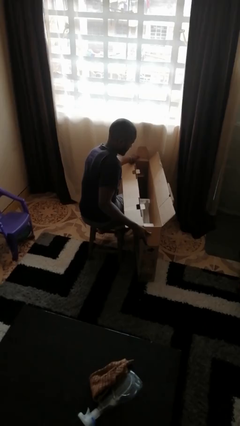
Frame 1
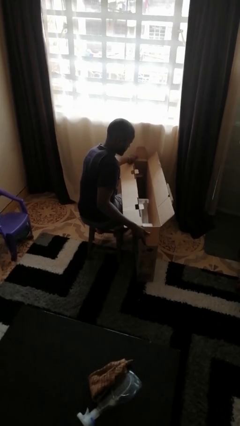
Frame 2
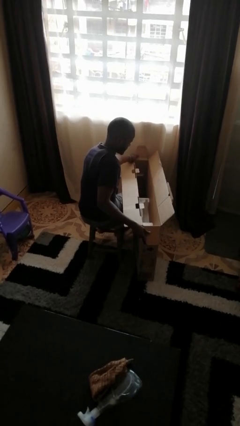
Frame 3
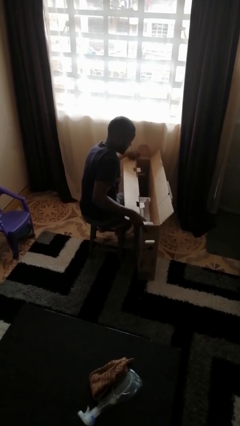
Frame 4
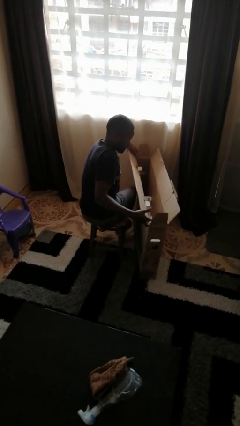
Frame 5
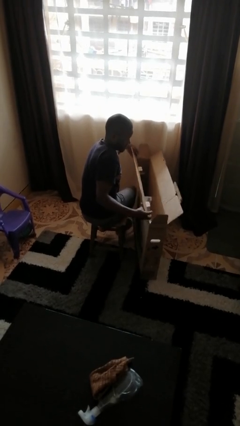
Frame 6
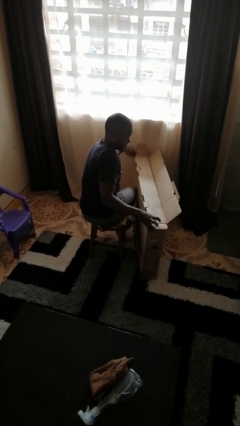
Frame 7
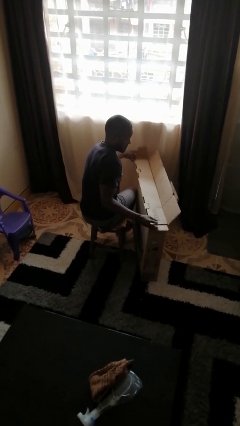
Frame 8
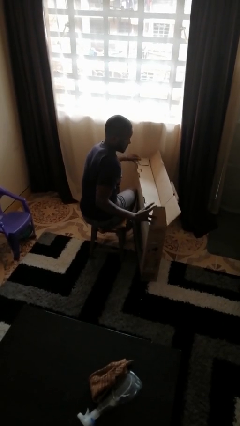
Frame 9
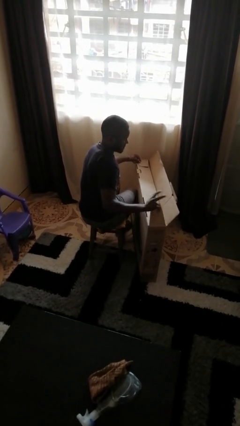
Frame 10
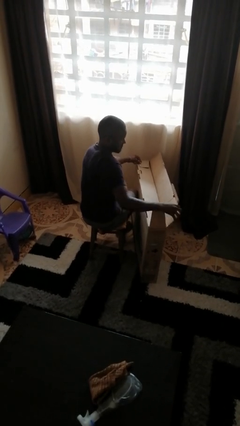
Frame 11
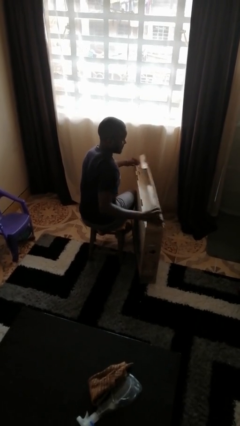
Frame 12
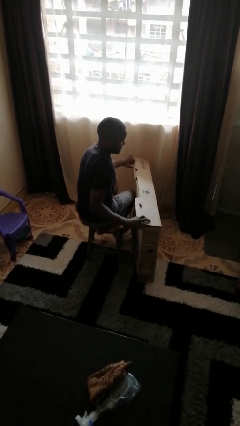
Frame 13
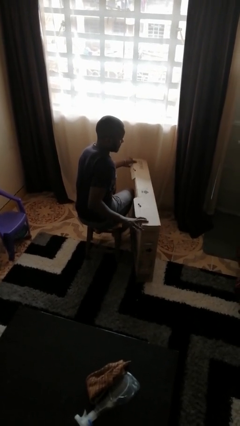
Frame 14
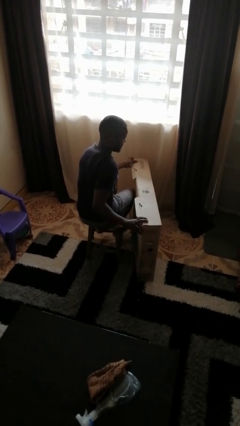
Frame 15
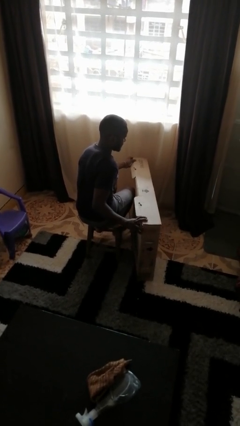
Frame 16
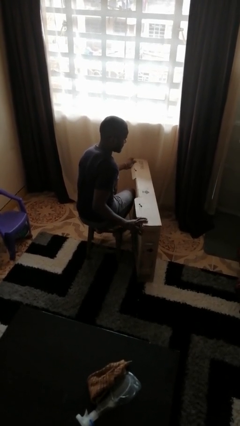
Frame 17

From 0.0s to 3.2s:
person closes box

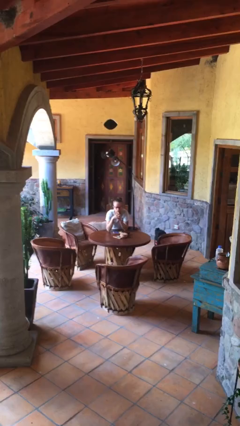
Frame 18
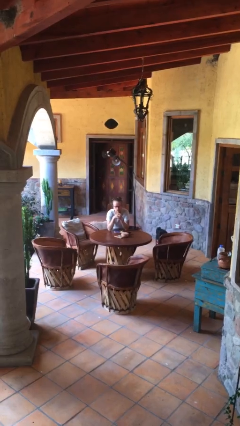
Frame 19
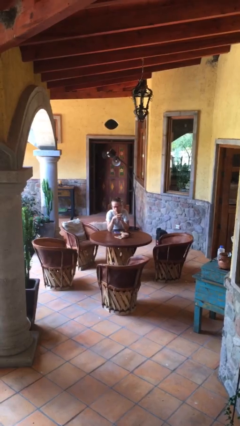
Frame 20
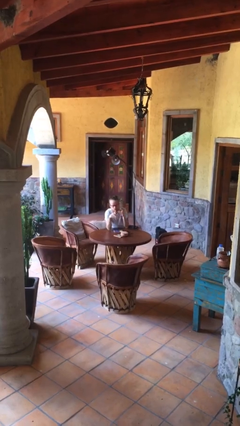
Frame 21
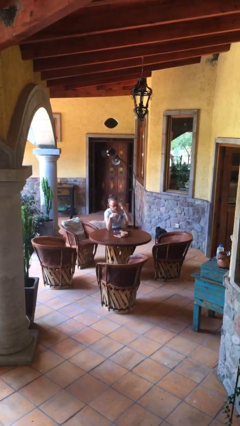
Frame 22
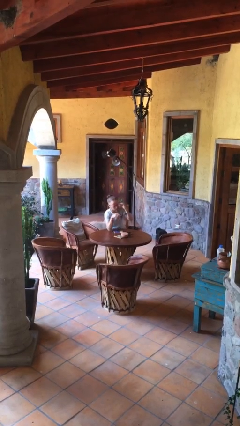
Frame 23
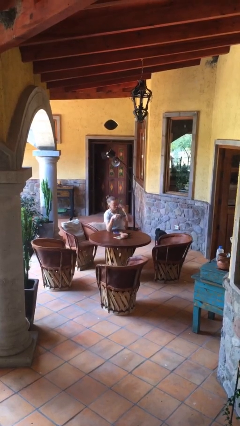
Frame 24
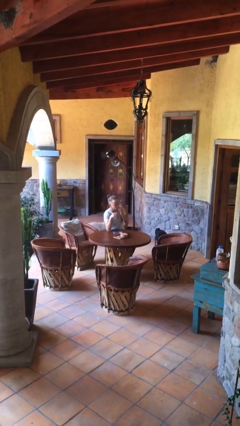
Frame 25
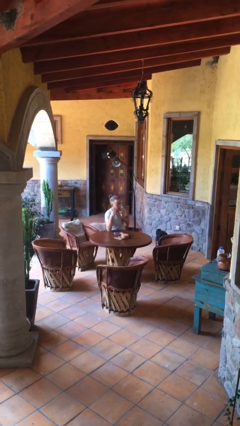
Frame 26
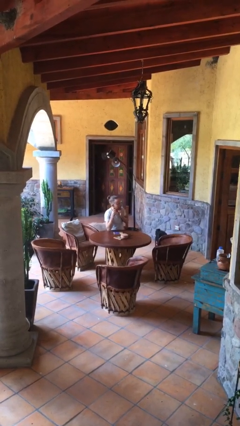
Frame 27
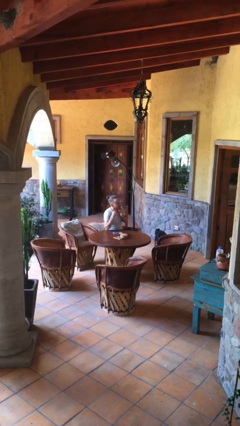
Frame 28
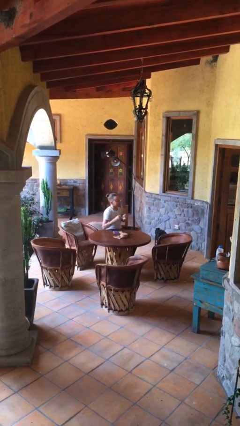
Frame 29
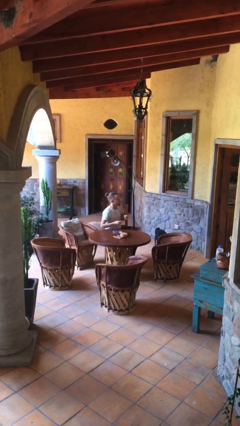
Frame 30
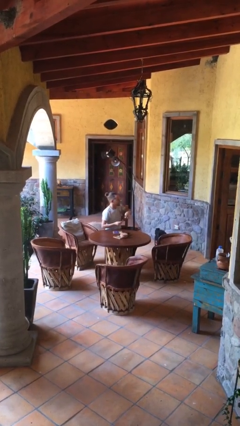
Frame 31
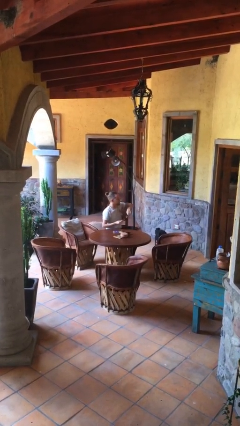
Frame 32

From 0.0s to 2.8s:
person takes off glasses

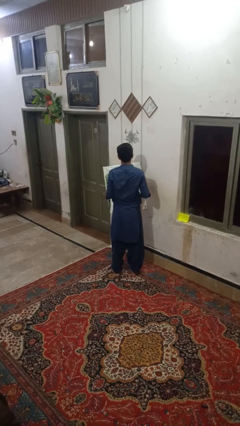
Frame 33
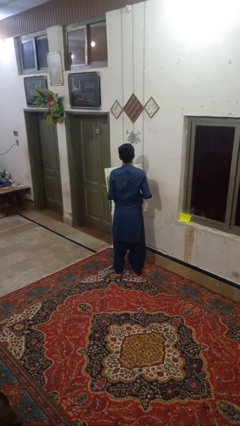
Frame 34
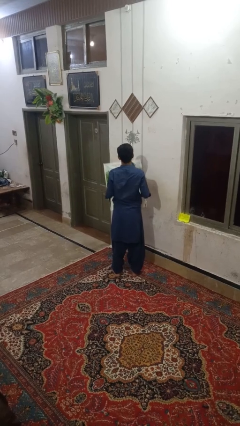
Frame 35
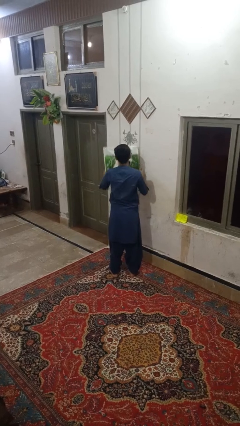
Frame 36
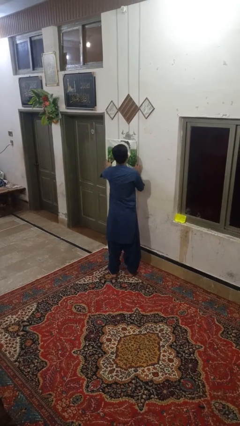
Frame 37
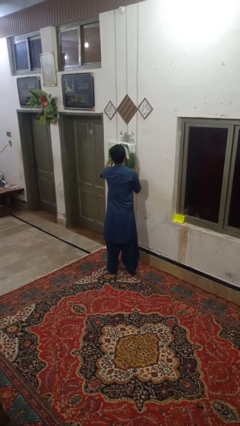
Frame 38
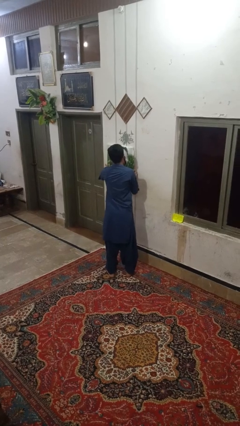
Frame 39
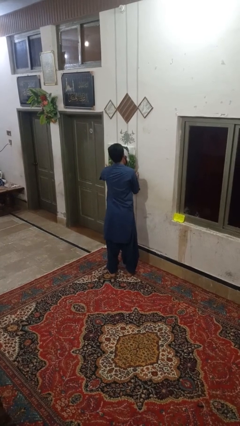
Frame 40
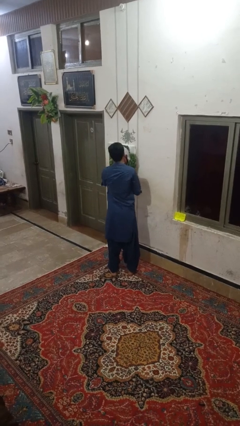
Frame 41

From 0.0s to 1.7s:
person puts up picture frame

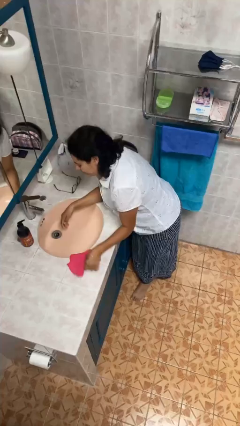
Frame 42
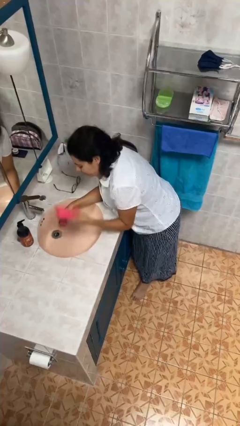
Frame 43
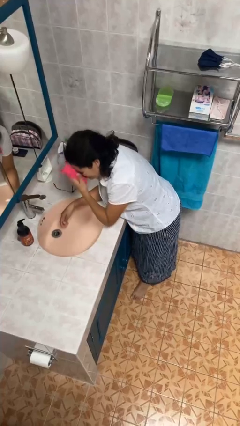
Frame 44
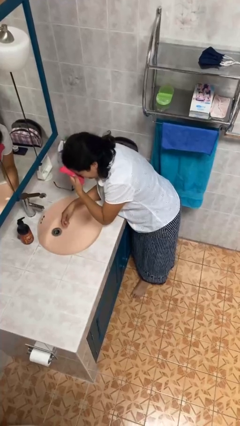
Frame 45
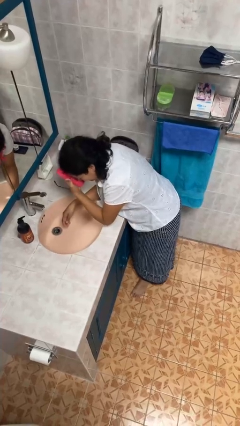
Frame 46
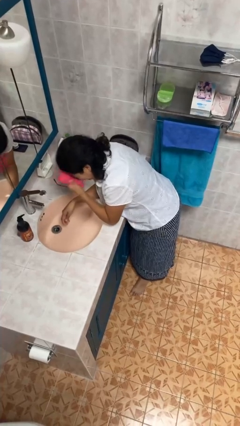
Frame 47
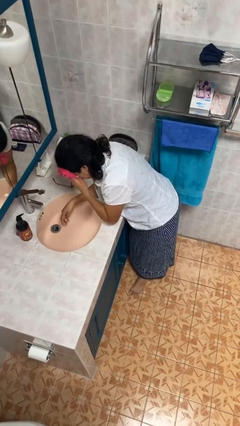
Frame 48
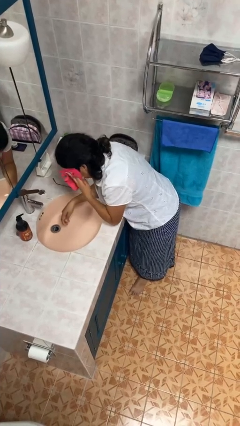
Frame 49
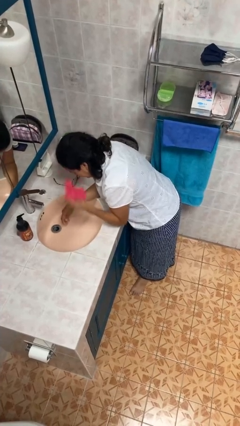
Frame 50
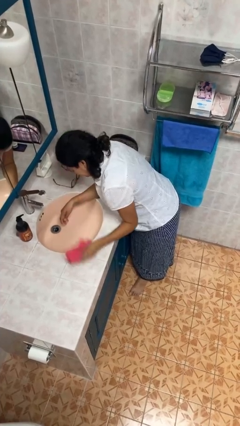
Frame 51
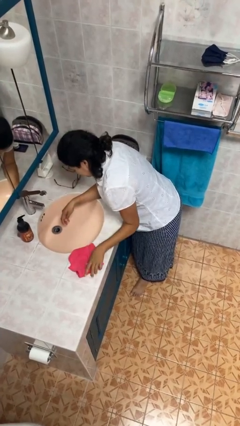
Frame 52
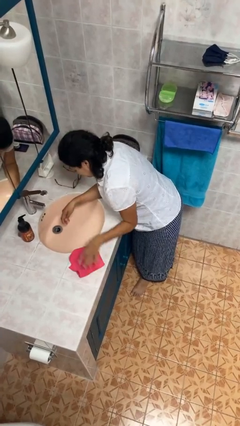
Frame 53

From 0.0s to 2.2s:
person dries face with towel

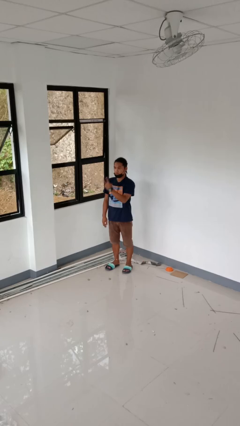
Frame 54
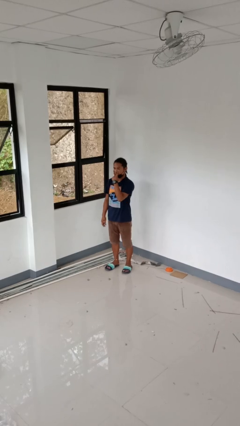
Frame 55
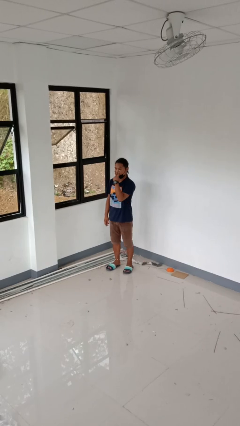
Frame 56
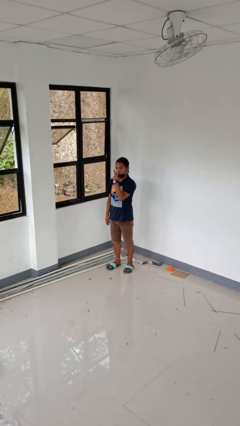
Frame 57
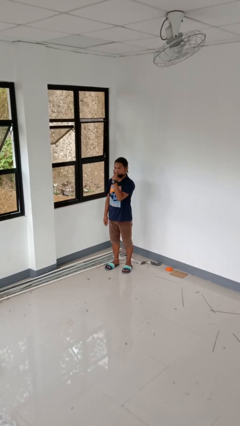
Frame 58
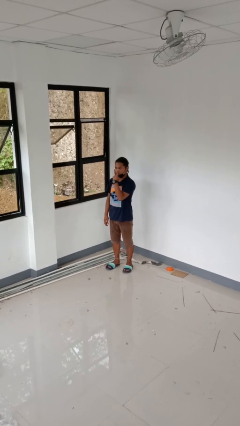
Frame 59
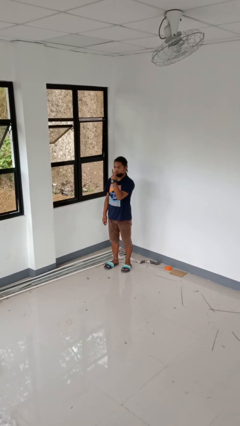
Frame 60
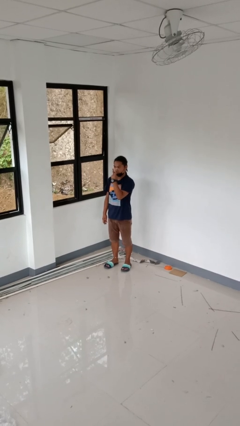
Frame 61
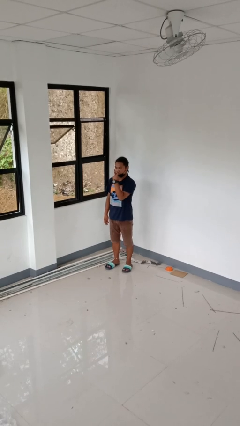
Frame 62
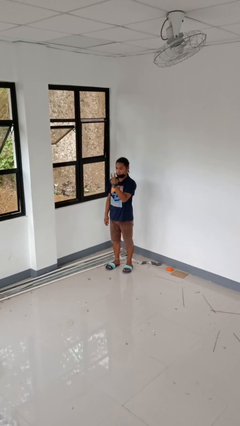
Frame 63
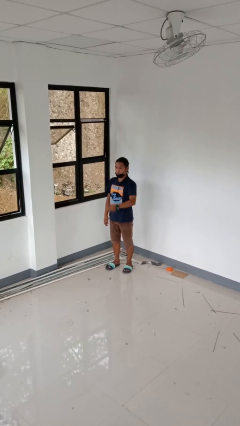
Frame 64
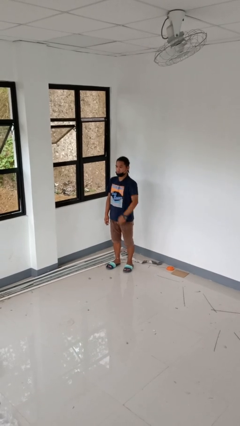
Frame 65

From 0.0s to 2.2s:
person gestures watch closely

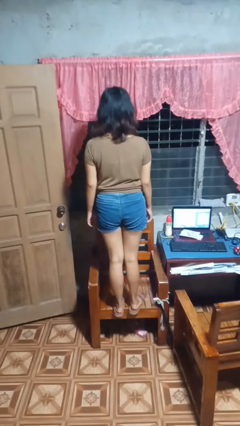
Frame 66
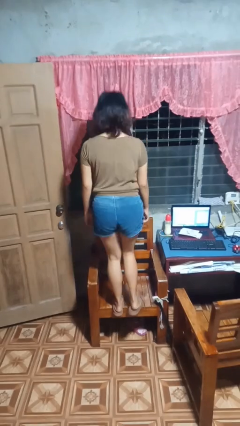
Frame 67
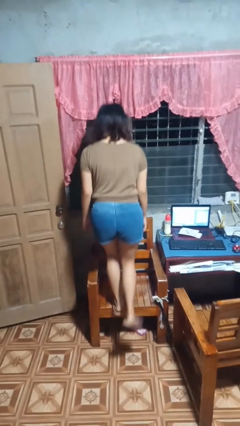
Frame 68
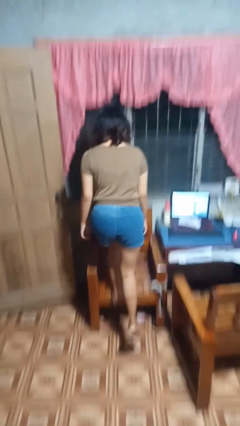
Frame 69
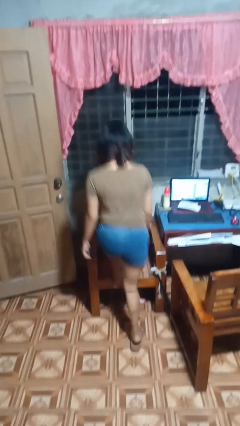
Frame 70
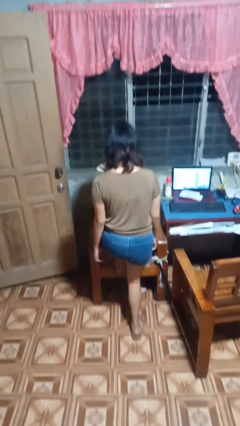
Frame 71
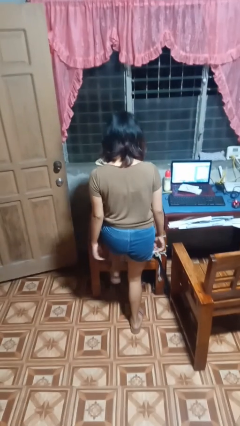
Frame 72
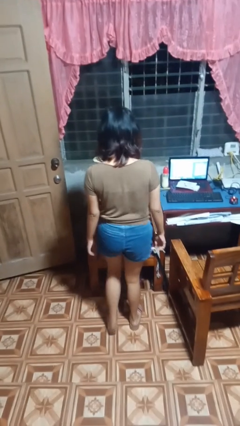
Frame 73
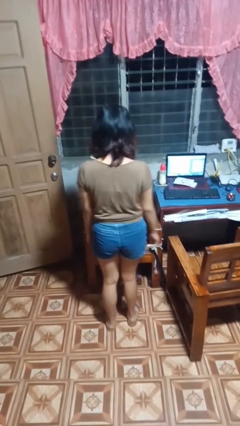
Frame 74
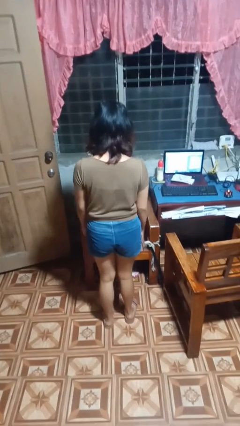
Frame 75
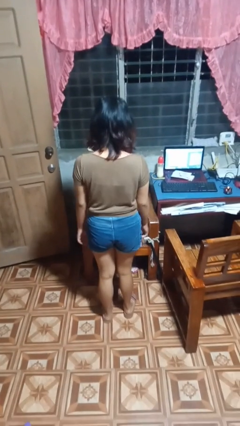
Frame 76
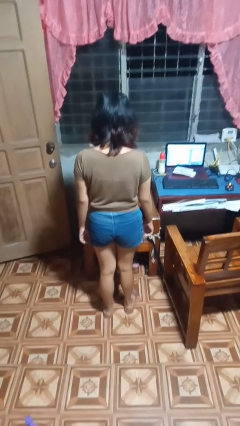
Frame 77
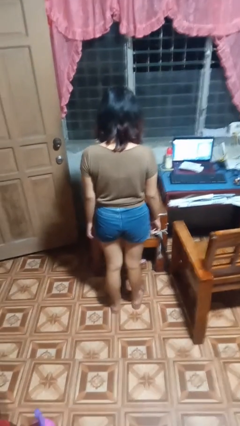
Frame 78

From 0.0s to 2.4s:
person climbs off chair

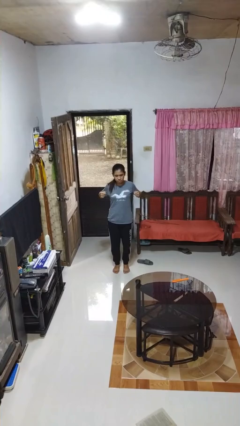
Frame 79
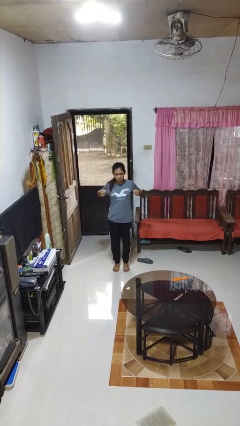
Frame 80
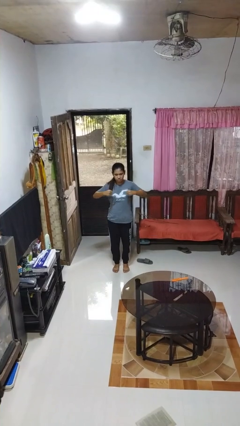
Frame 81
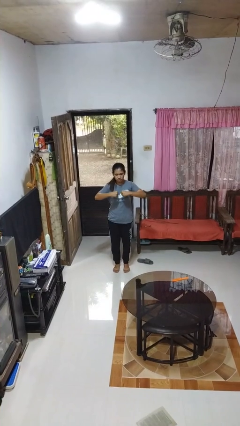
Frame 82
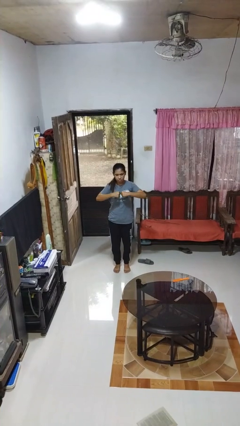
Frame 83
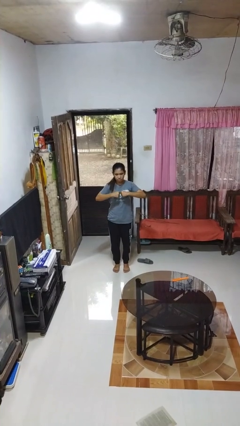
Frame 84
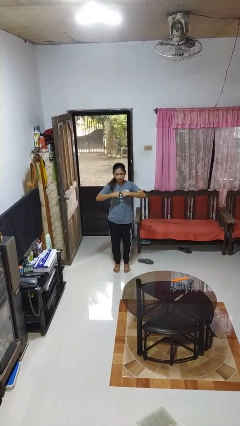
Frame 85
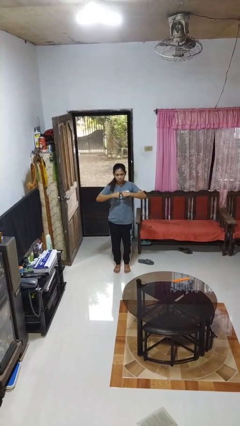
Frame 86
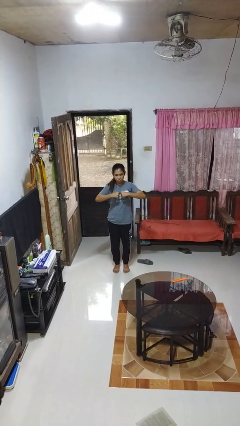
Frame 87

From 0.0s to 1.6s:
person gestures zoom out

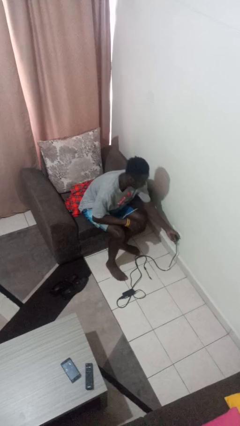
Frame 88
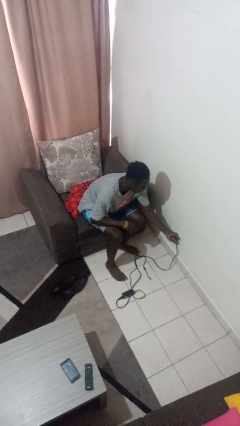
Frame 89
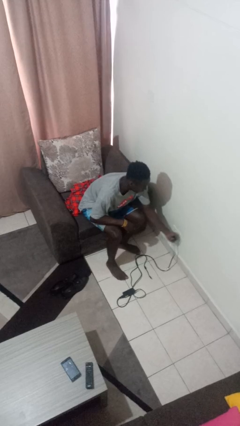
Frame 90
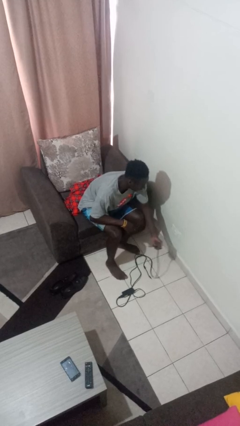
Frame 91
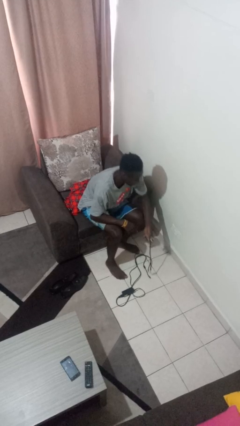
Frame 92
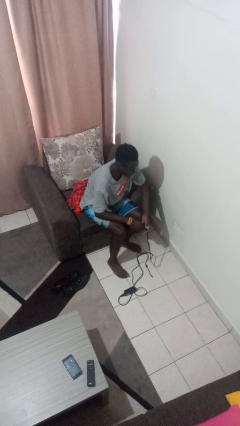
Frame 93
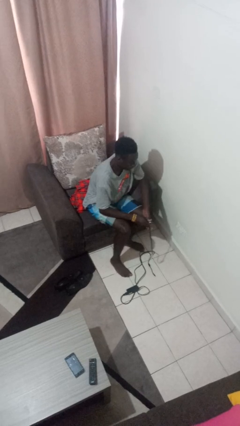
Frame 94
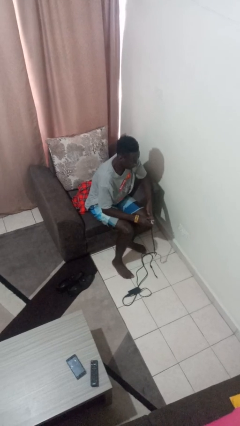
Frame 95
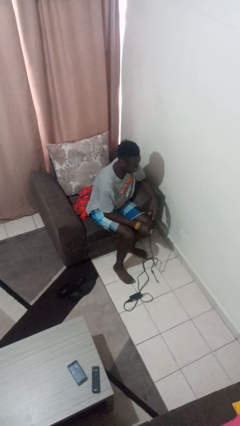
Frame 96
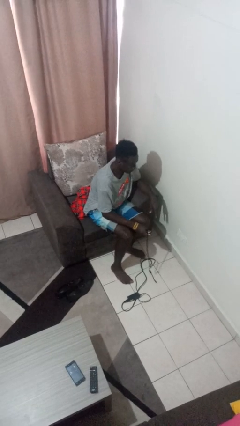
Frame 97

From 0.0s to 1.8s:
person unplugs from electrical socket
